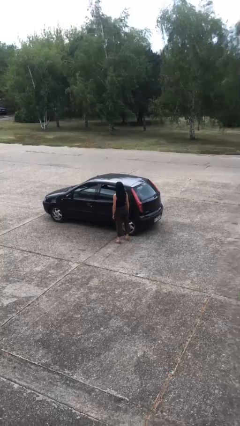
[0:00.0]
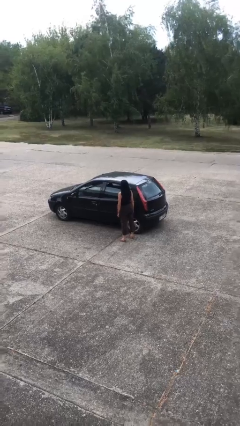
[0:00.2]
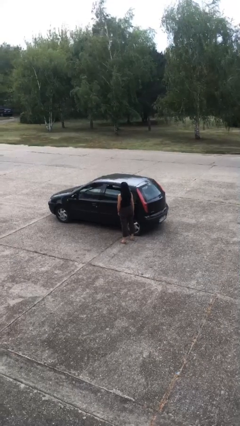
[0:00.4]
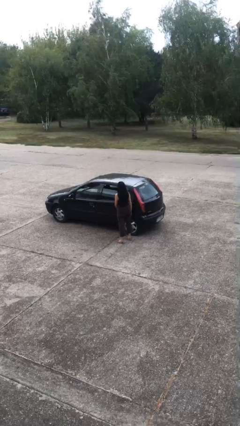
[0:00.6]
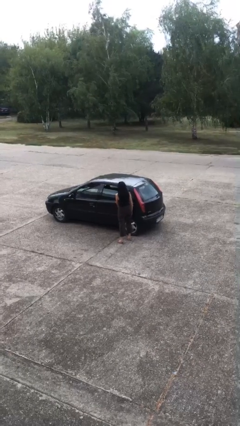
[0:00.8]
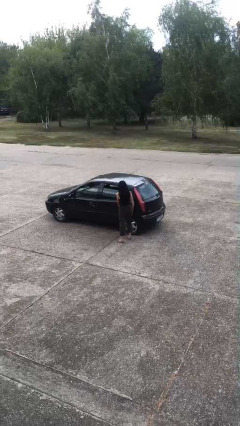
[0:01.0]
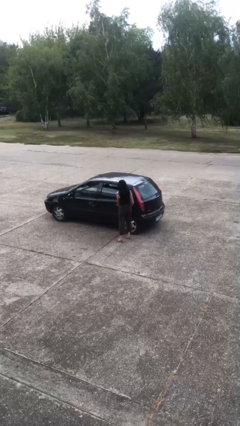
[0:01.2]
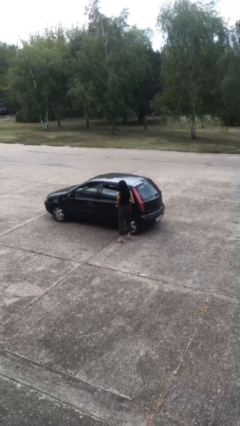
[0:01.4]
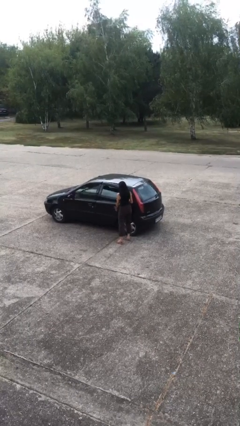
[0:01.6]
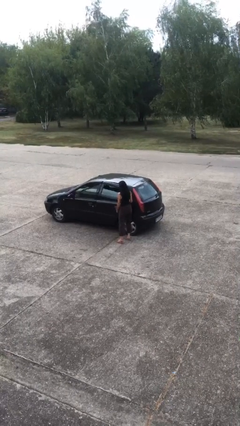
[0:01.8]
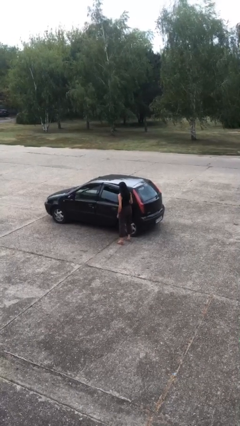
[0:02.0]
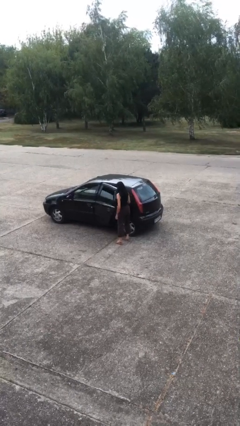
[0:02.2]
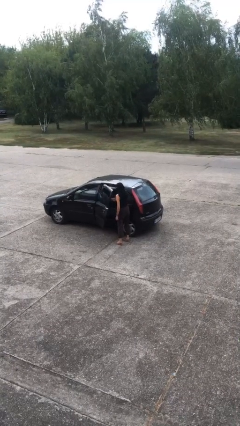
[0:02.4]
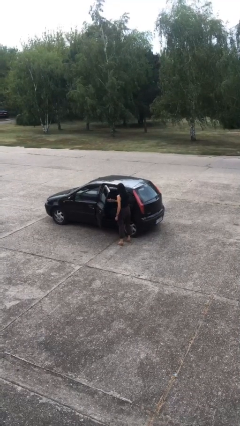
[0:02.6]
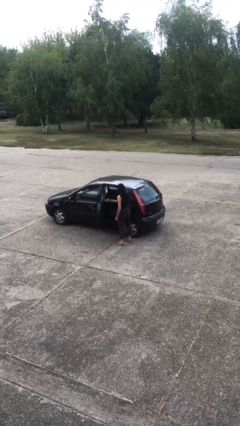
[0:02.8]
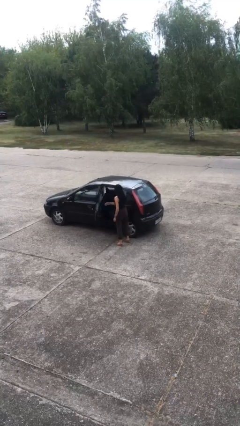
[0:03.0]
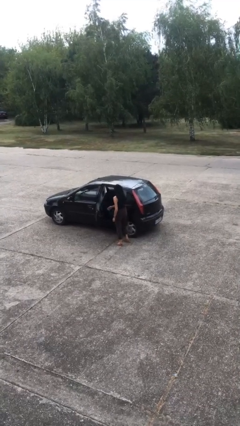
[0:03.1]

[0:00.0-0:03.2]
person opens car door

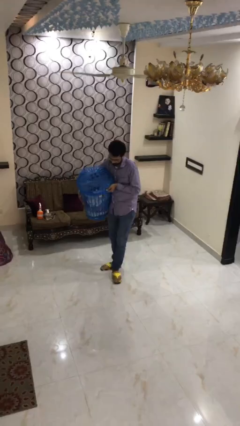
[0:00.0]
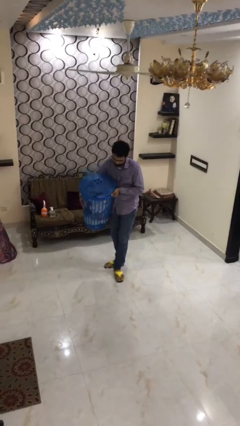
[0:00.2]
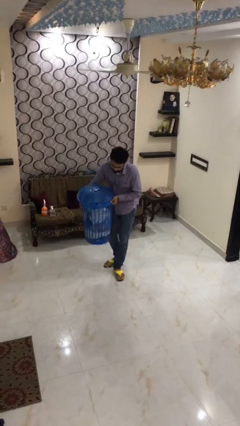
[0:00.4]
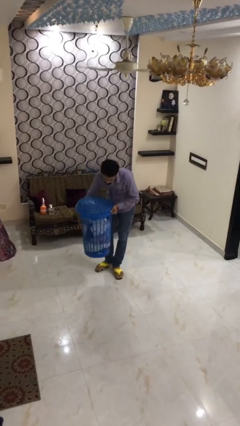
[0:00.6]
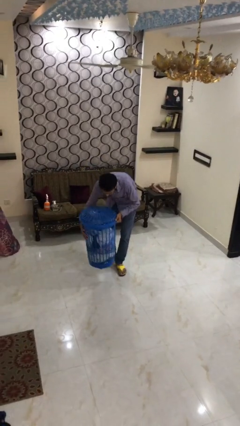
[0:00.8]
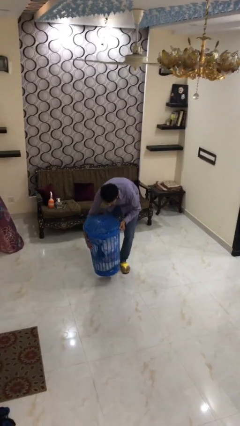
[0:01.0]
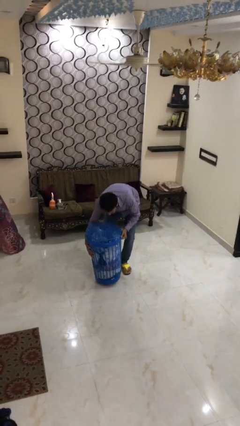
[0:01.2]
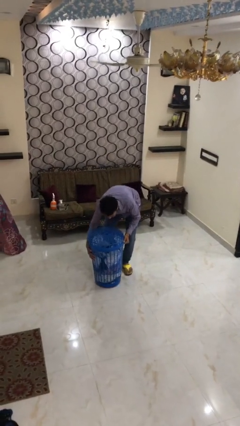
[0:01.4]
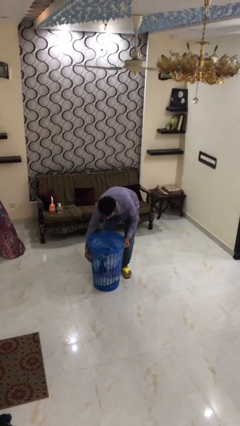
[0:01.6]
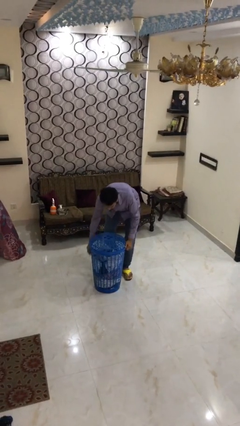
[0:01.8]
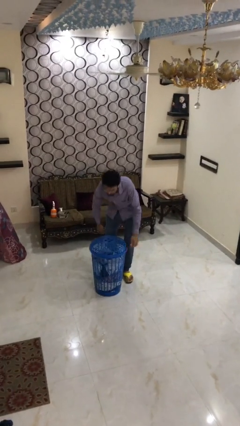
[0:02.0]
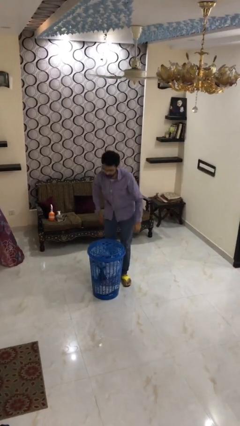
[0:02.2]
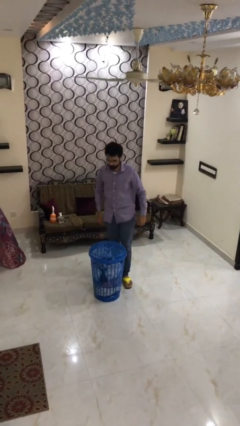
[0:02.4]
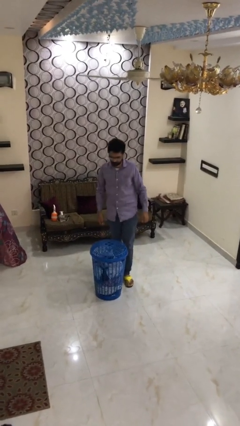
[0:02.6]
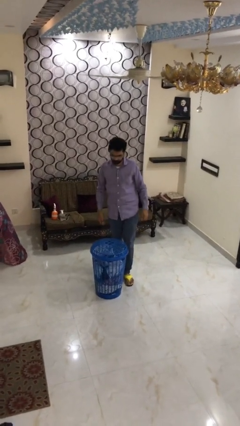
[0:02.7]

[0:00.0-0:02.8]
person puts down object on floor

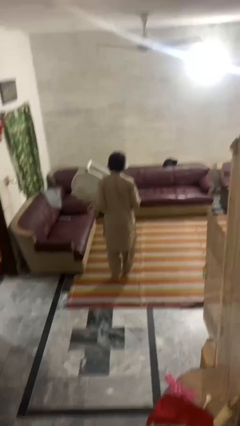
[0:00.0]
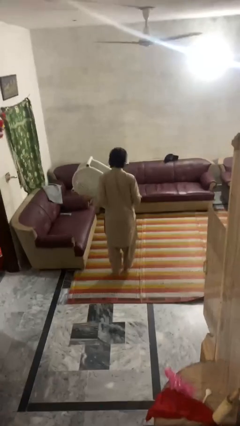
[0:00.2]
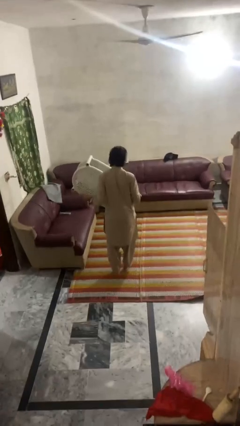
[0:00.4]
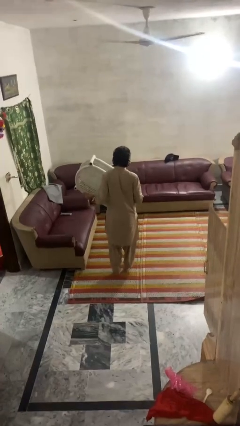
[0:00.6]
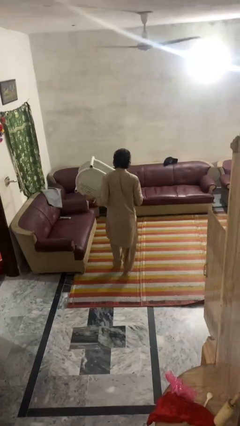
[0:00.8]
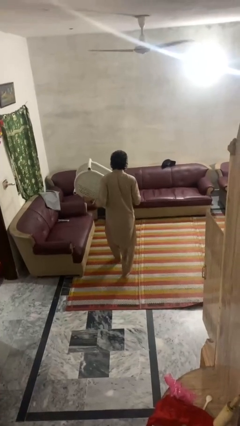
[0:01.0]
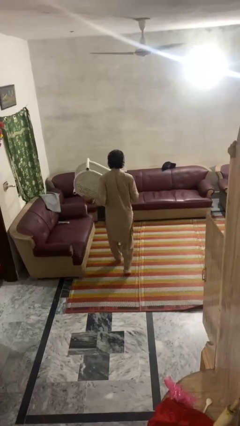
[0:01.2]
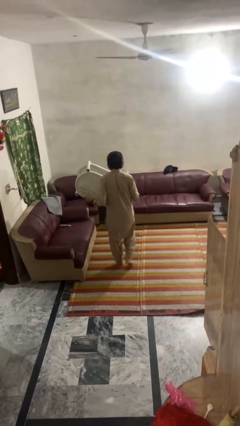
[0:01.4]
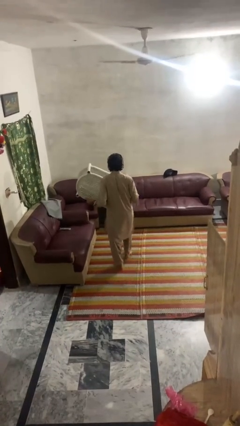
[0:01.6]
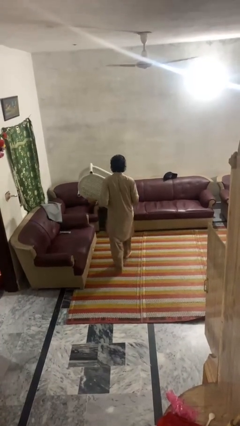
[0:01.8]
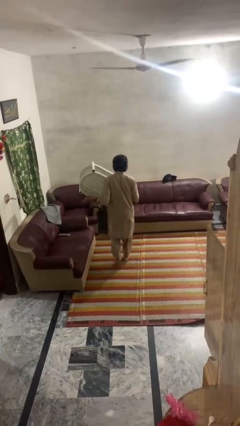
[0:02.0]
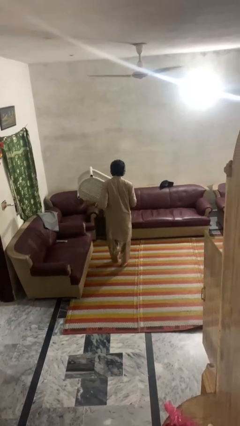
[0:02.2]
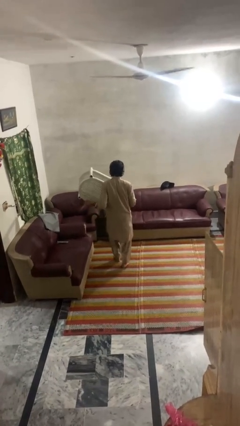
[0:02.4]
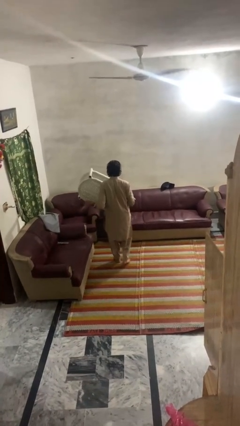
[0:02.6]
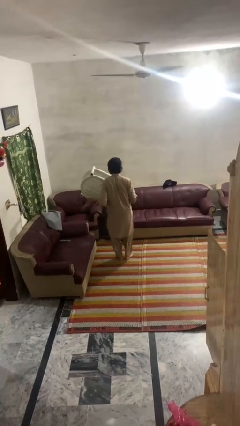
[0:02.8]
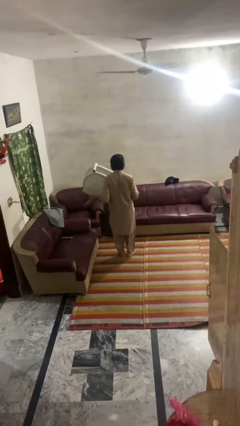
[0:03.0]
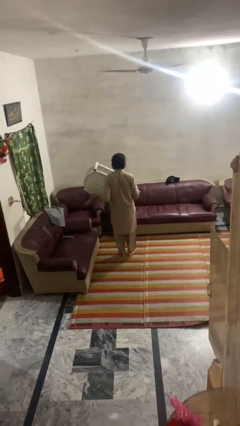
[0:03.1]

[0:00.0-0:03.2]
person carries groceries

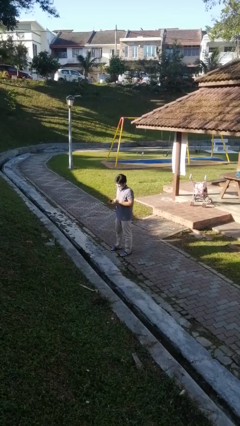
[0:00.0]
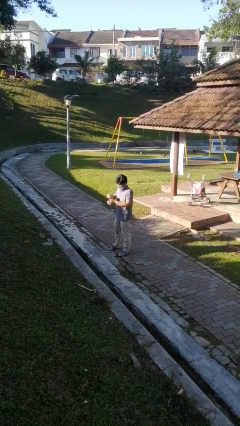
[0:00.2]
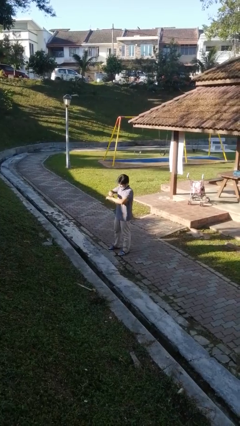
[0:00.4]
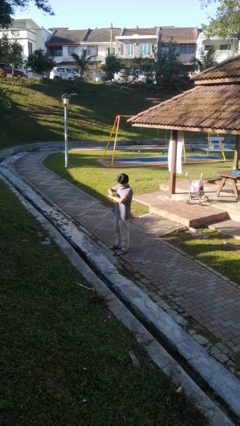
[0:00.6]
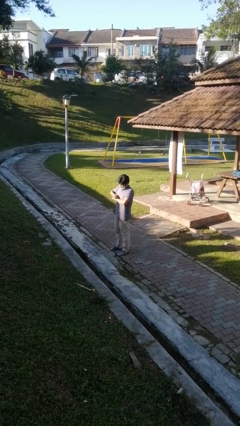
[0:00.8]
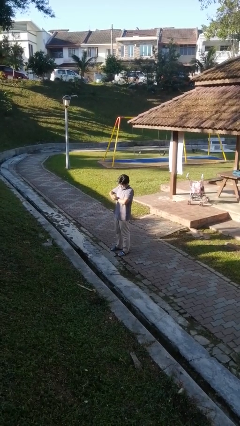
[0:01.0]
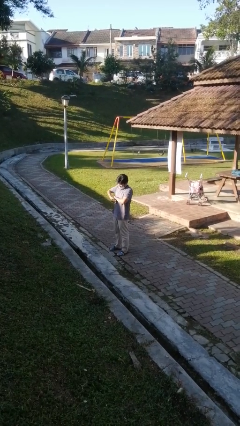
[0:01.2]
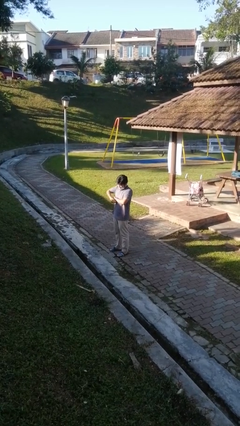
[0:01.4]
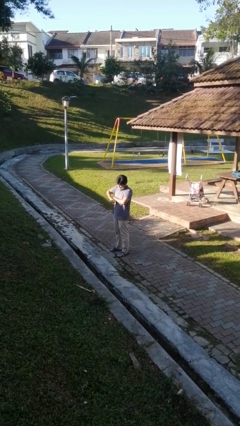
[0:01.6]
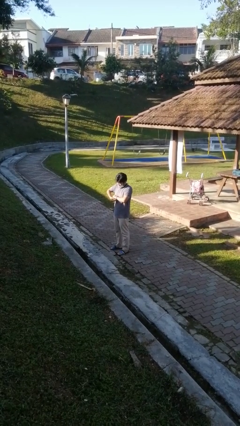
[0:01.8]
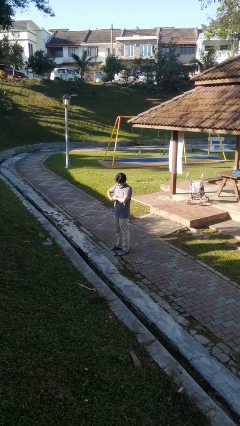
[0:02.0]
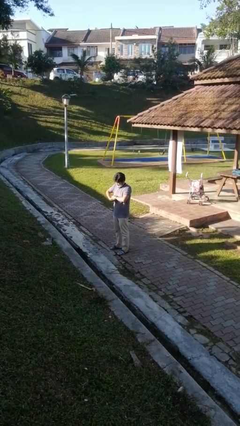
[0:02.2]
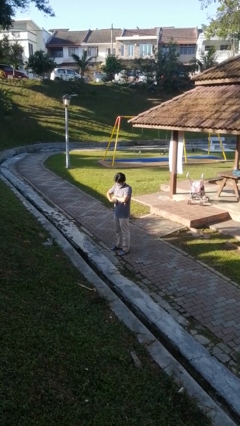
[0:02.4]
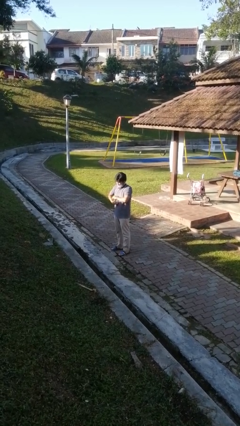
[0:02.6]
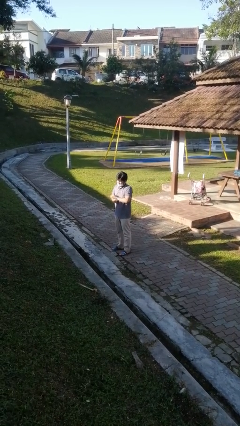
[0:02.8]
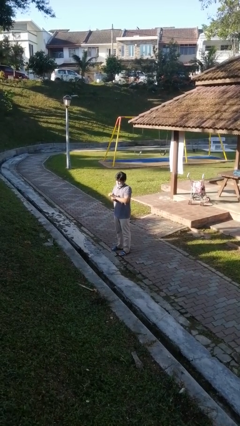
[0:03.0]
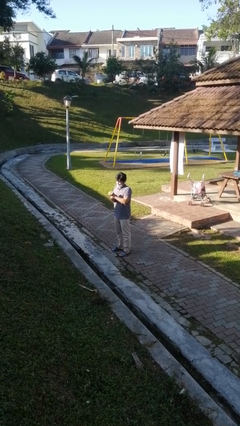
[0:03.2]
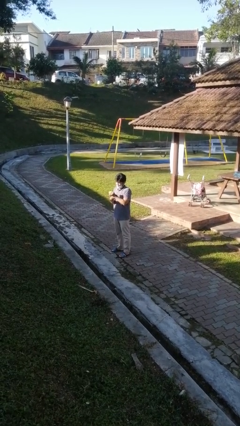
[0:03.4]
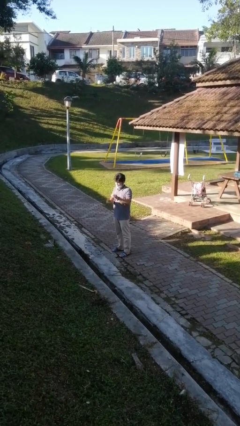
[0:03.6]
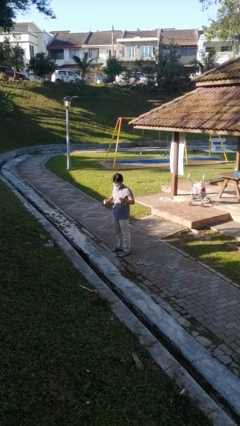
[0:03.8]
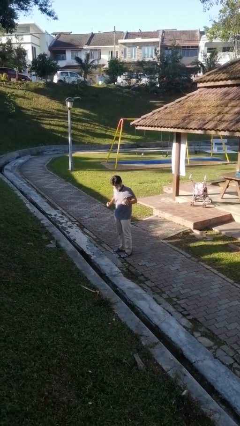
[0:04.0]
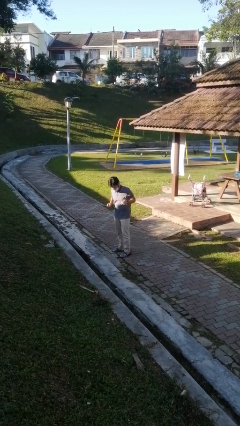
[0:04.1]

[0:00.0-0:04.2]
person puts on wristwatch

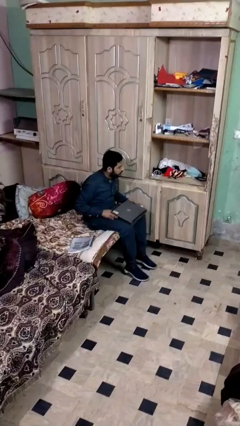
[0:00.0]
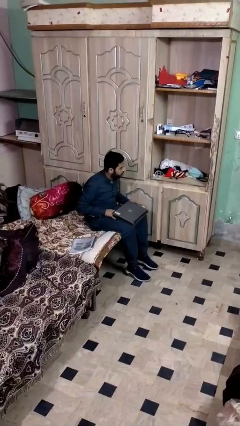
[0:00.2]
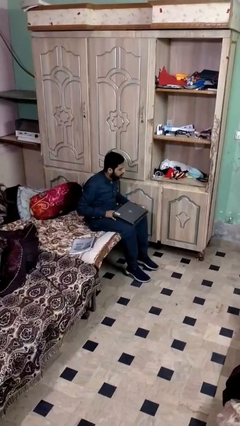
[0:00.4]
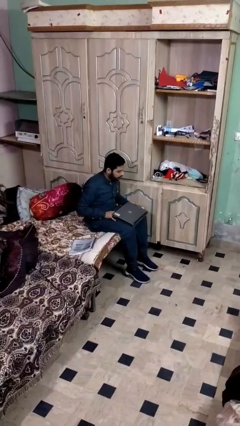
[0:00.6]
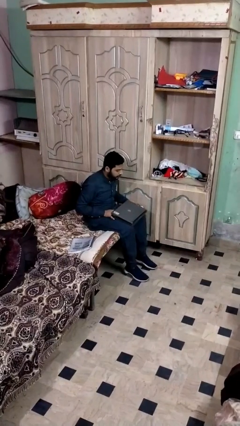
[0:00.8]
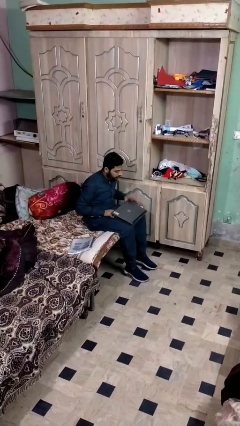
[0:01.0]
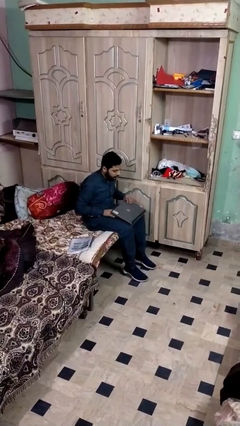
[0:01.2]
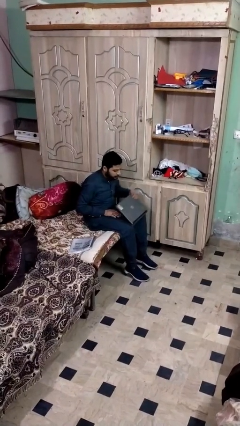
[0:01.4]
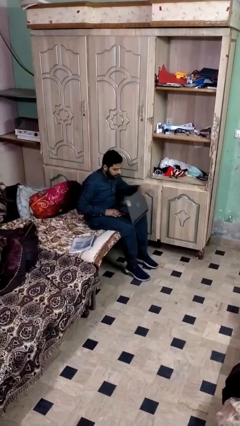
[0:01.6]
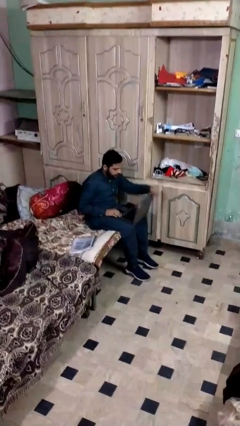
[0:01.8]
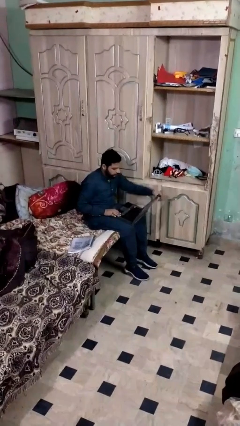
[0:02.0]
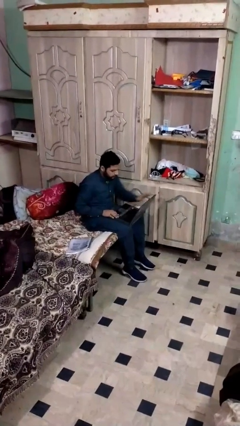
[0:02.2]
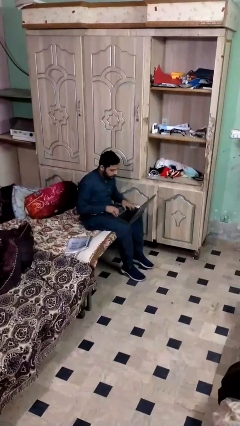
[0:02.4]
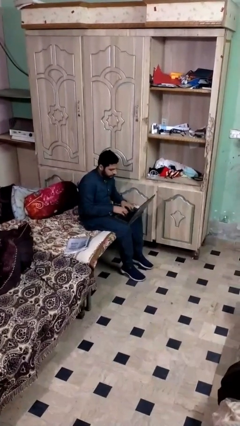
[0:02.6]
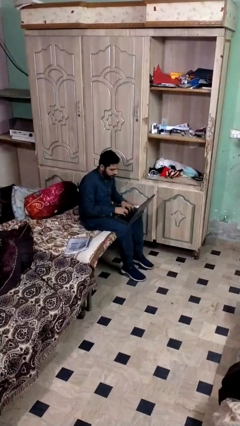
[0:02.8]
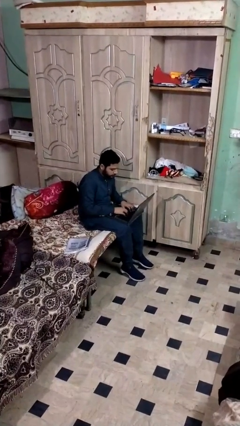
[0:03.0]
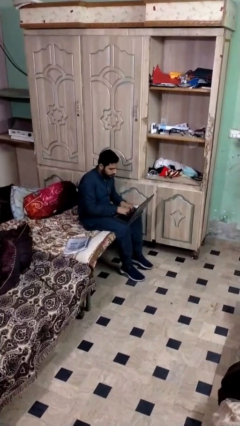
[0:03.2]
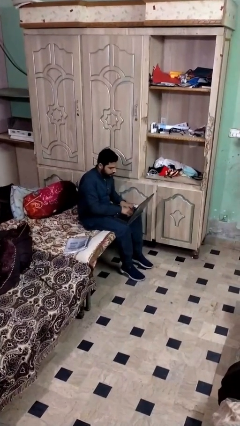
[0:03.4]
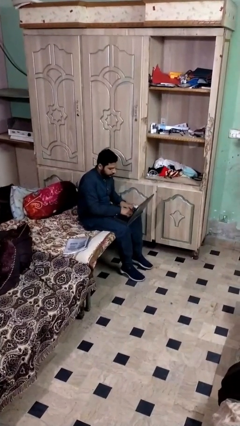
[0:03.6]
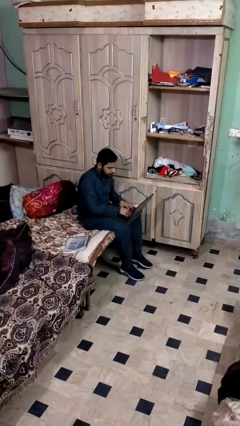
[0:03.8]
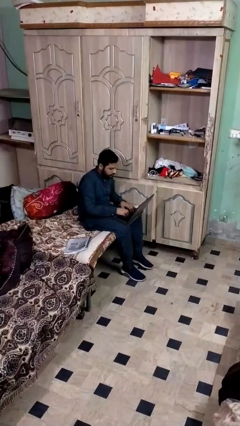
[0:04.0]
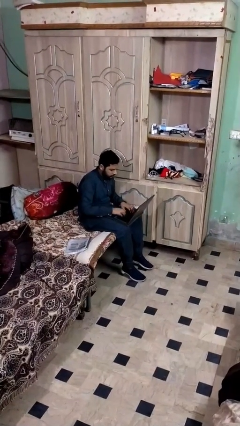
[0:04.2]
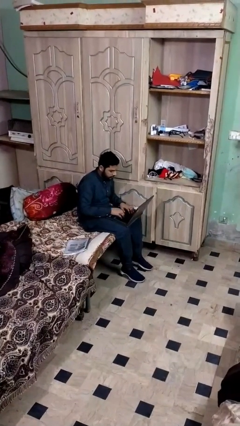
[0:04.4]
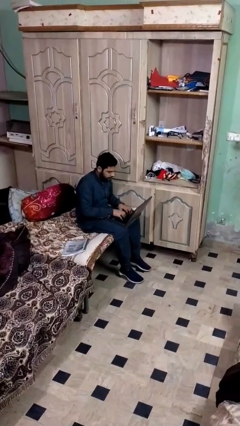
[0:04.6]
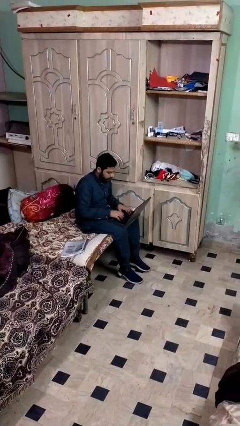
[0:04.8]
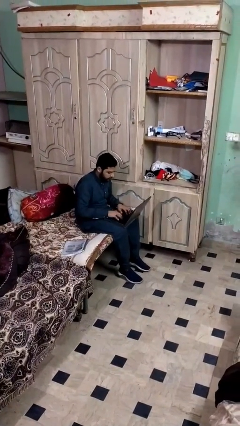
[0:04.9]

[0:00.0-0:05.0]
person interacts with laptop
